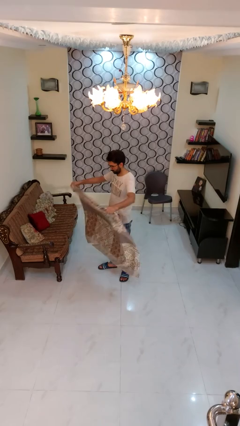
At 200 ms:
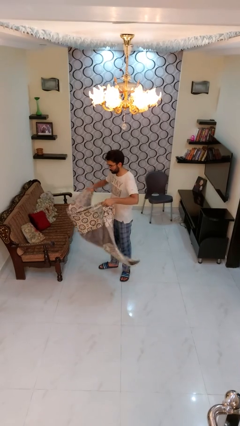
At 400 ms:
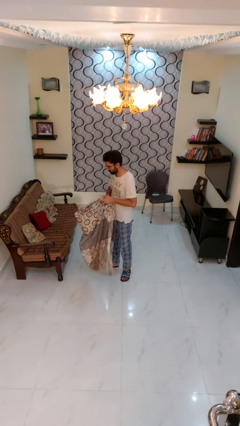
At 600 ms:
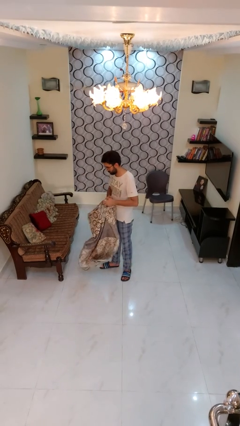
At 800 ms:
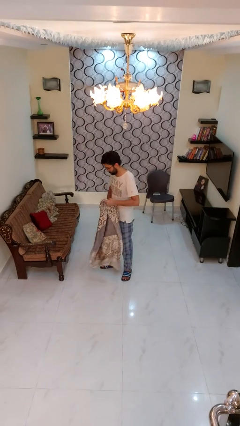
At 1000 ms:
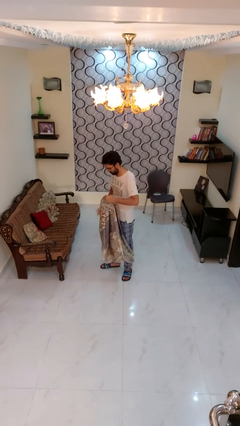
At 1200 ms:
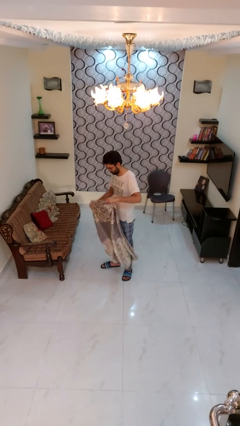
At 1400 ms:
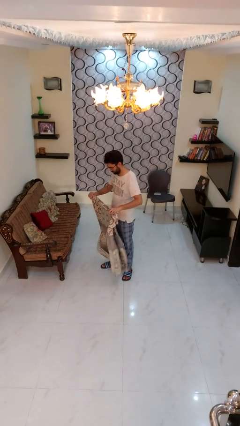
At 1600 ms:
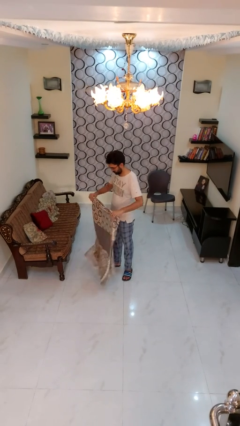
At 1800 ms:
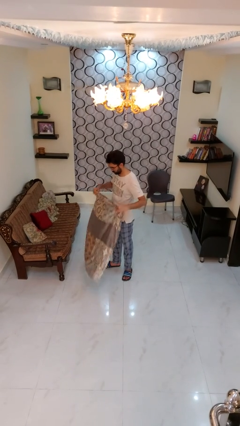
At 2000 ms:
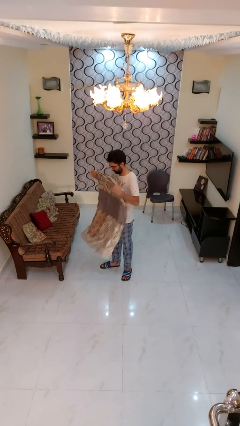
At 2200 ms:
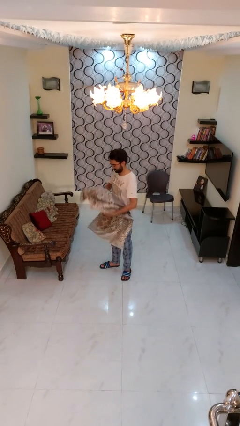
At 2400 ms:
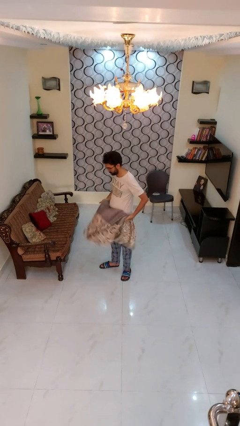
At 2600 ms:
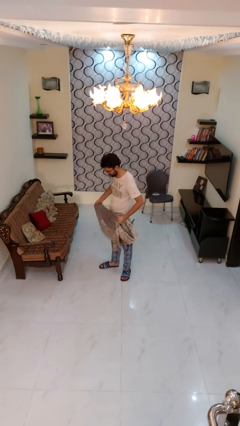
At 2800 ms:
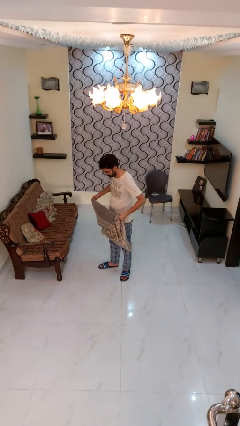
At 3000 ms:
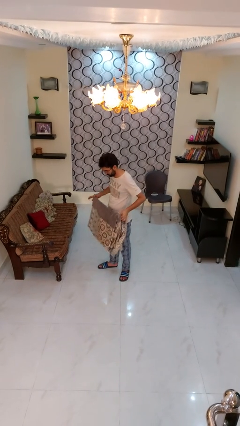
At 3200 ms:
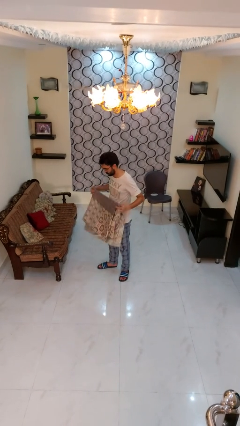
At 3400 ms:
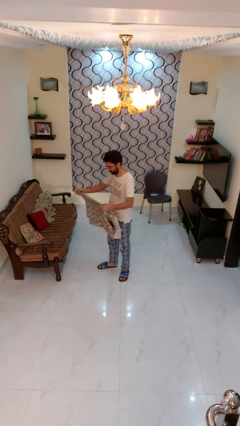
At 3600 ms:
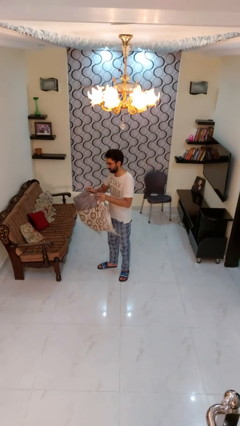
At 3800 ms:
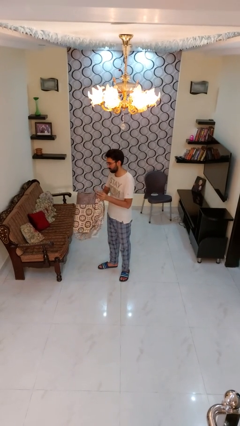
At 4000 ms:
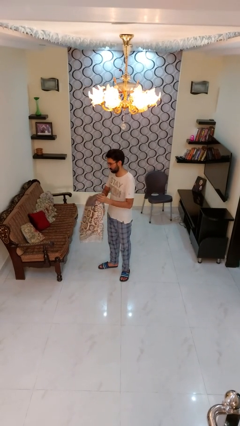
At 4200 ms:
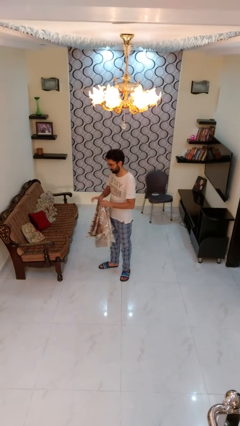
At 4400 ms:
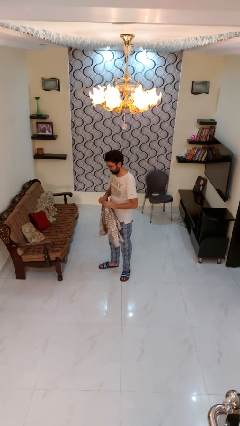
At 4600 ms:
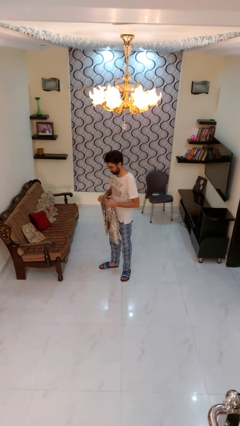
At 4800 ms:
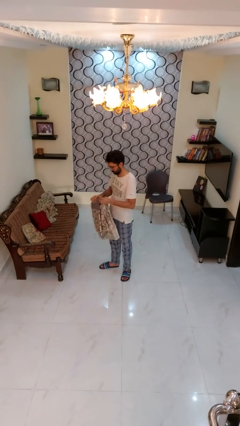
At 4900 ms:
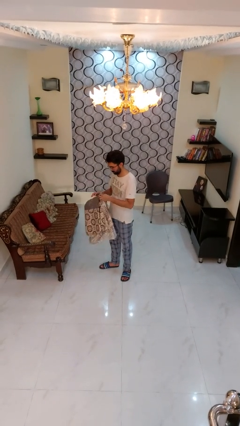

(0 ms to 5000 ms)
person folds blanket

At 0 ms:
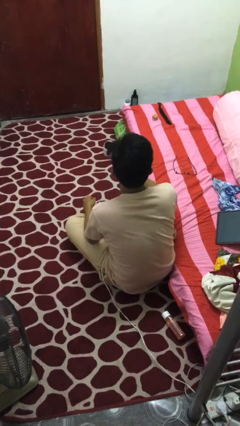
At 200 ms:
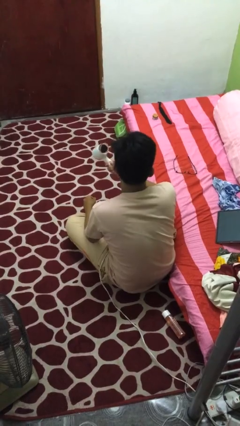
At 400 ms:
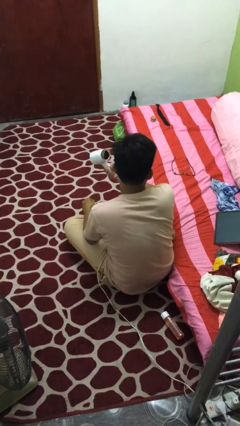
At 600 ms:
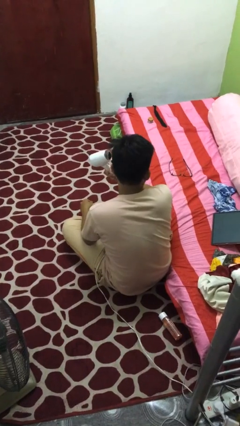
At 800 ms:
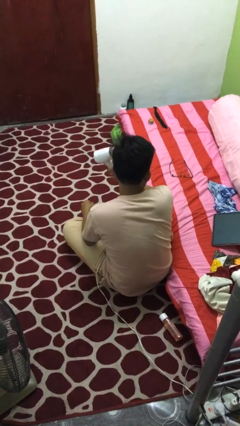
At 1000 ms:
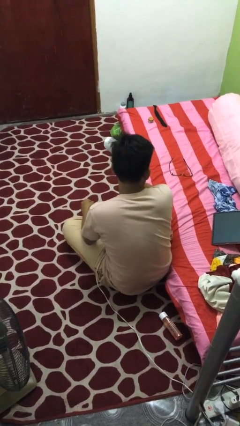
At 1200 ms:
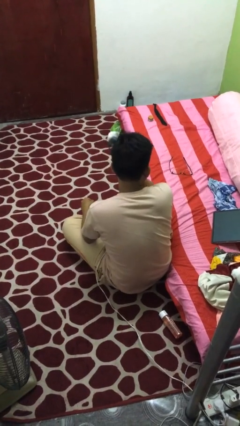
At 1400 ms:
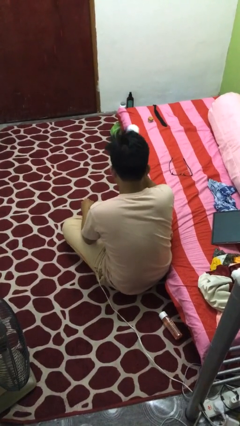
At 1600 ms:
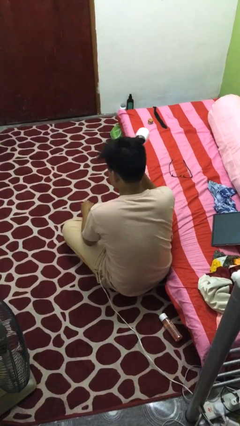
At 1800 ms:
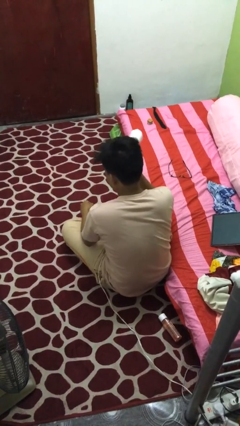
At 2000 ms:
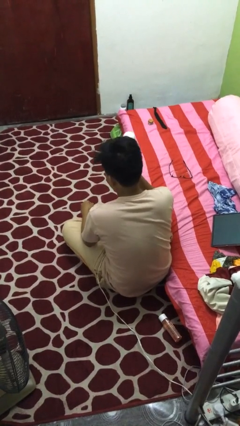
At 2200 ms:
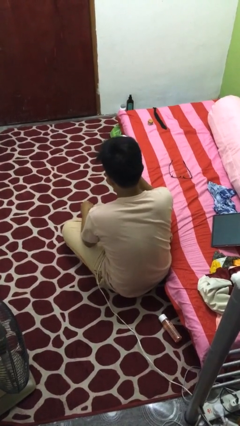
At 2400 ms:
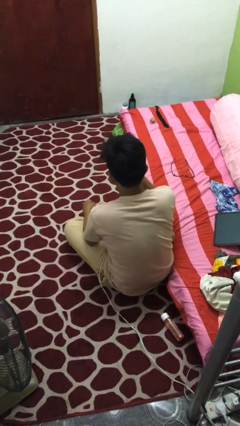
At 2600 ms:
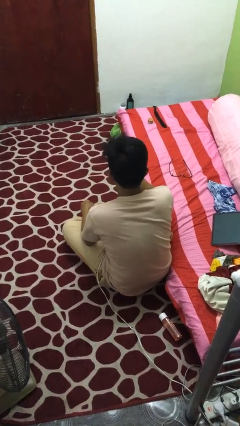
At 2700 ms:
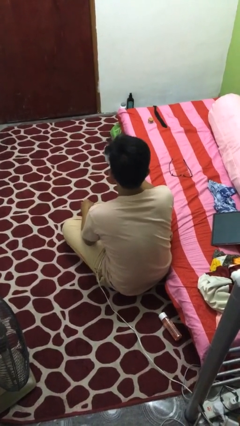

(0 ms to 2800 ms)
person dries hair with hairdryer

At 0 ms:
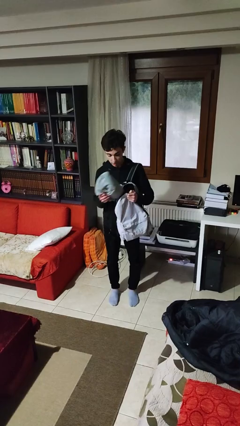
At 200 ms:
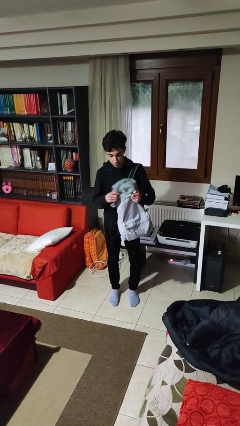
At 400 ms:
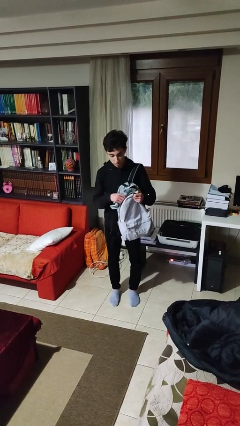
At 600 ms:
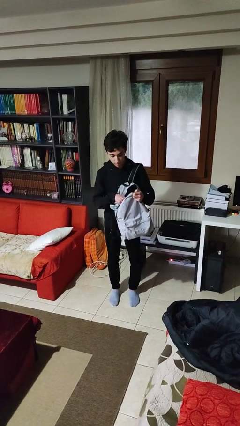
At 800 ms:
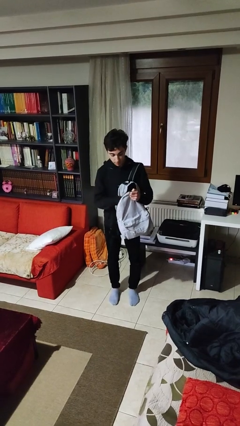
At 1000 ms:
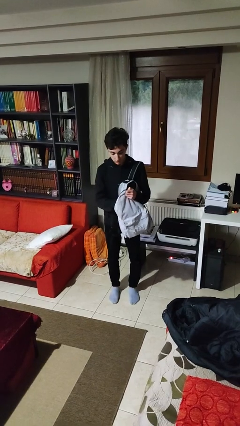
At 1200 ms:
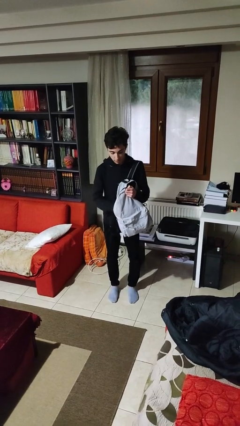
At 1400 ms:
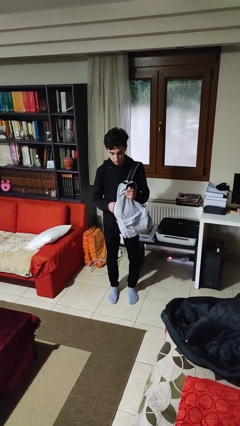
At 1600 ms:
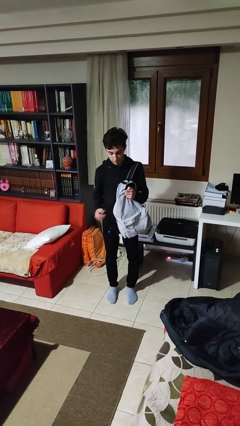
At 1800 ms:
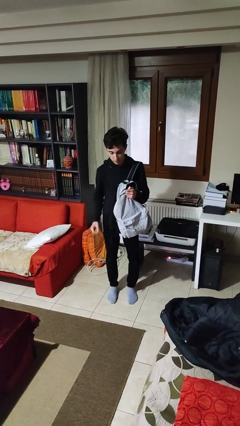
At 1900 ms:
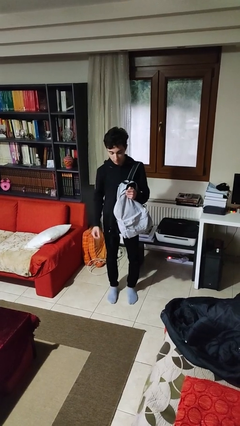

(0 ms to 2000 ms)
person puts object into backpack

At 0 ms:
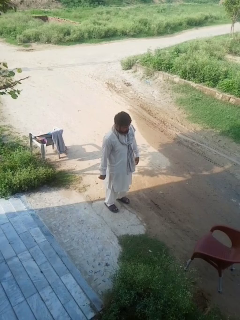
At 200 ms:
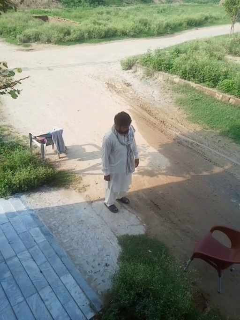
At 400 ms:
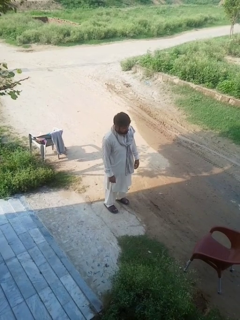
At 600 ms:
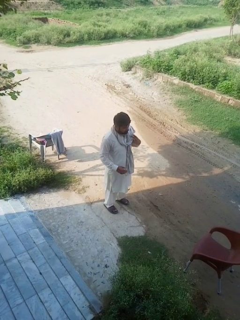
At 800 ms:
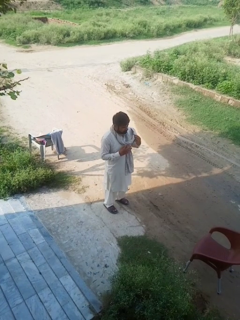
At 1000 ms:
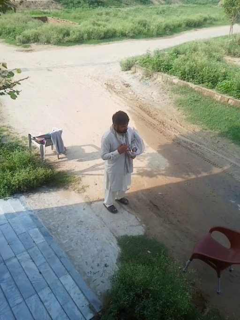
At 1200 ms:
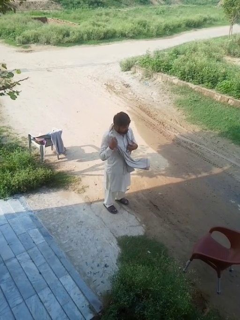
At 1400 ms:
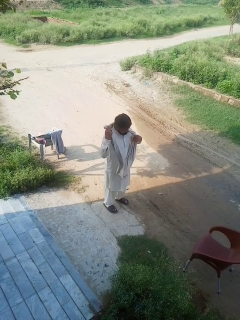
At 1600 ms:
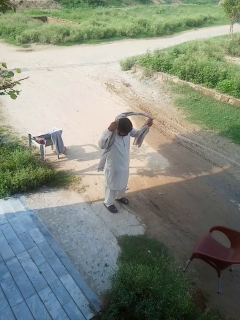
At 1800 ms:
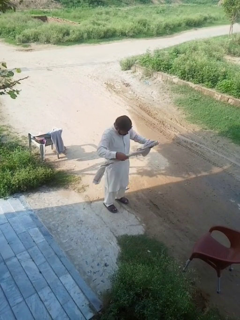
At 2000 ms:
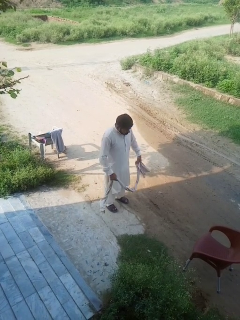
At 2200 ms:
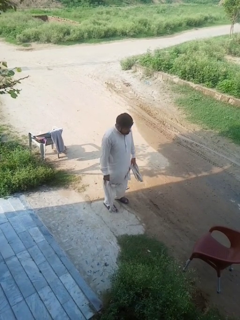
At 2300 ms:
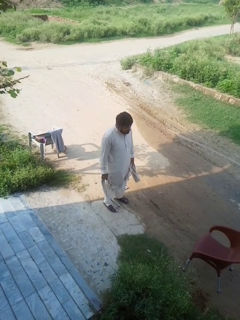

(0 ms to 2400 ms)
person takes off scarf

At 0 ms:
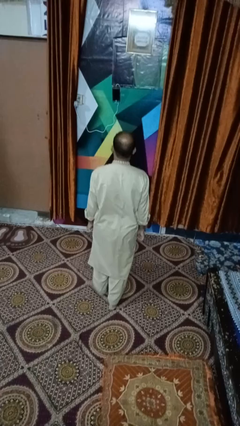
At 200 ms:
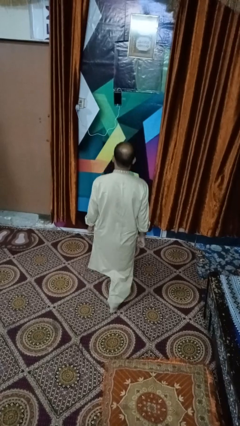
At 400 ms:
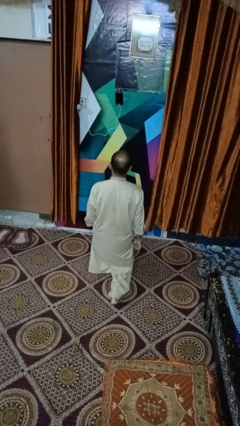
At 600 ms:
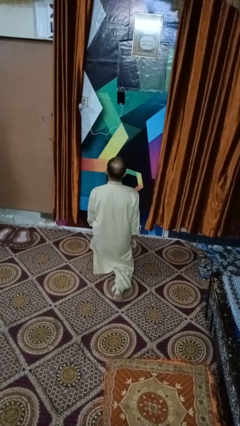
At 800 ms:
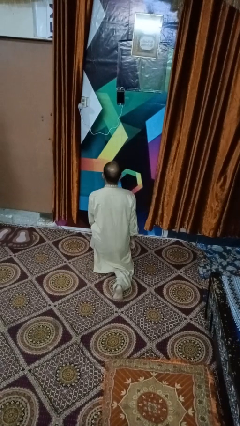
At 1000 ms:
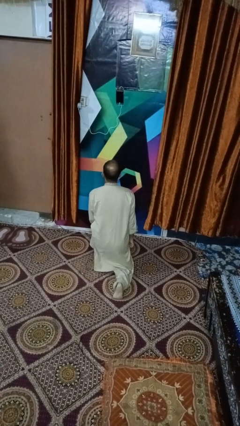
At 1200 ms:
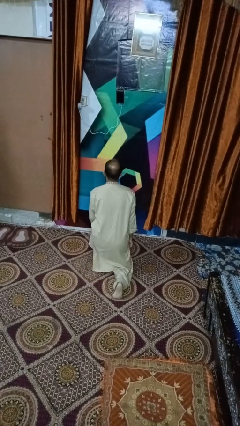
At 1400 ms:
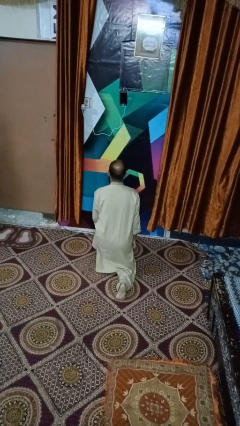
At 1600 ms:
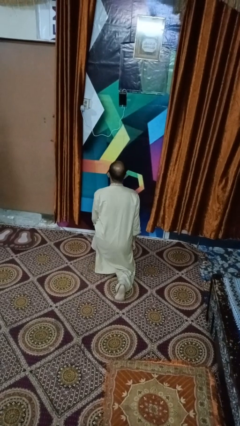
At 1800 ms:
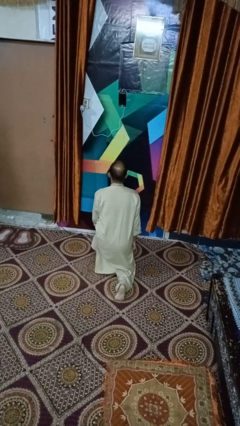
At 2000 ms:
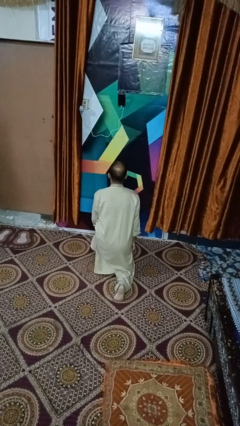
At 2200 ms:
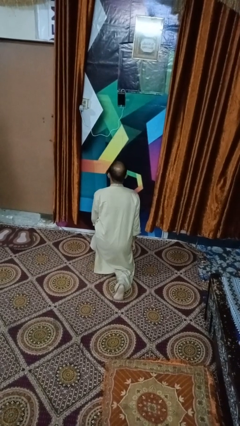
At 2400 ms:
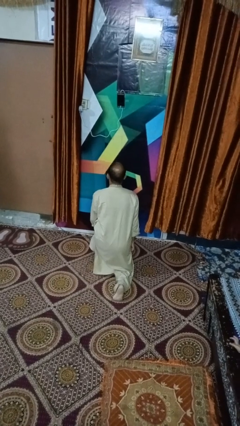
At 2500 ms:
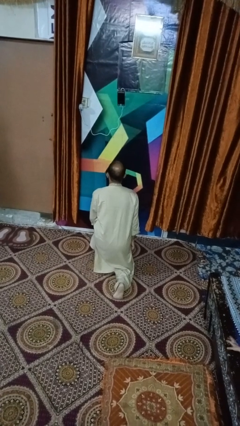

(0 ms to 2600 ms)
person exercises with lunges

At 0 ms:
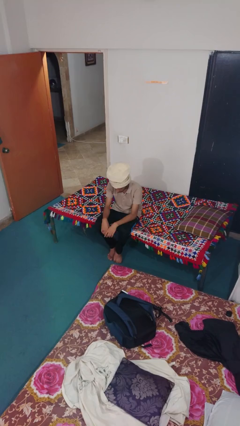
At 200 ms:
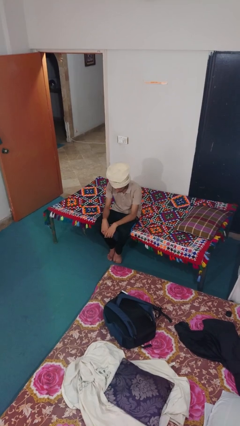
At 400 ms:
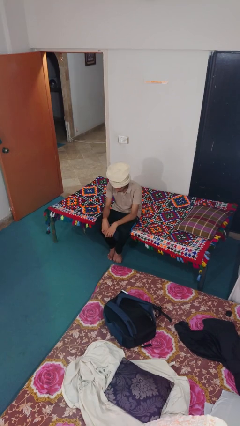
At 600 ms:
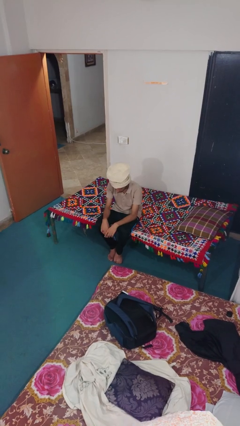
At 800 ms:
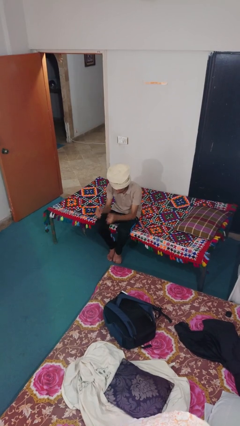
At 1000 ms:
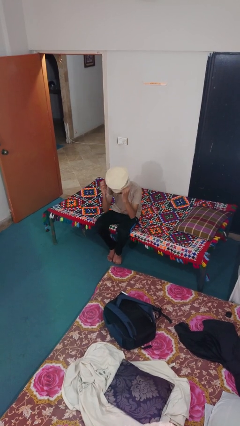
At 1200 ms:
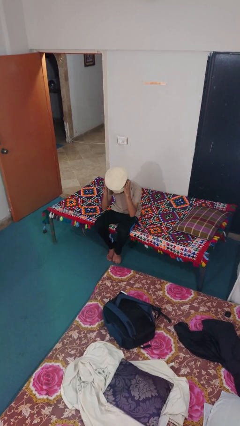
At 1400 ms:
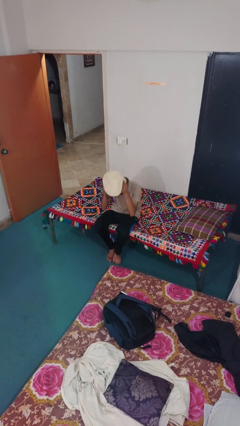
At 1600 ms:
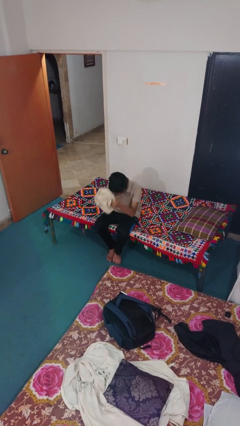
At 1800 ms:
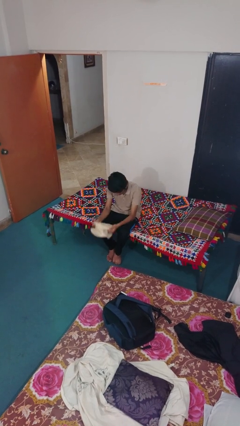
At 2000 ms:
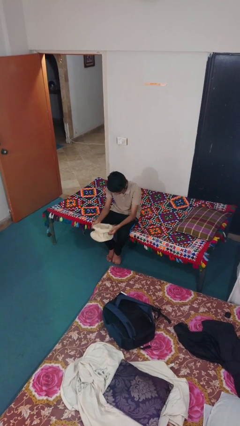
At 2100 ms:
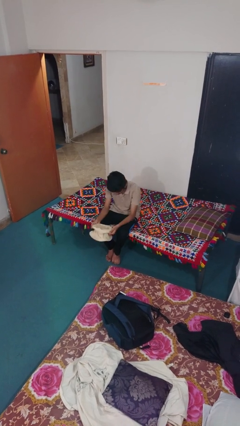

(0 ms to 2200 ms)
person takes off hat

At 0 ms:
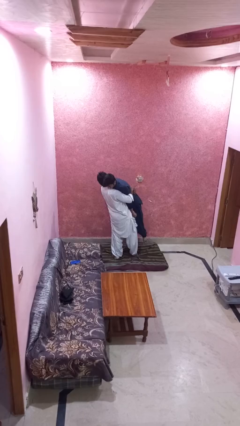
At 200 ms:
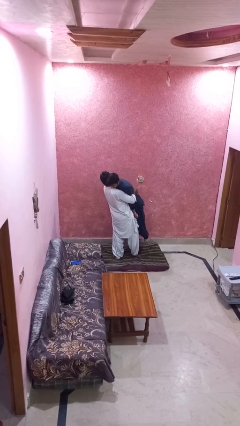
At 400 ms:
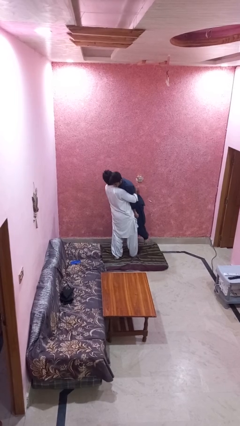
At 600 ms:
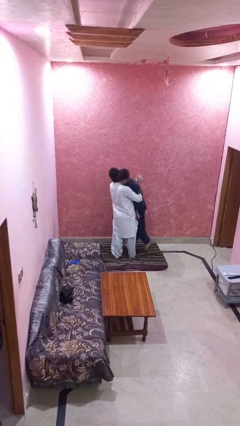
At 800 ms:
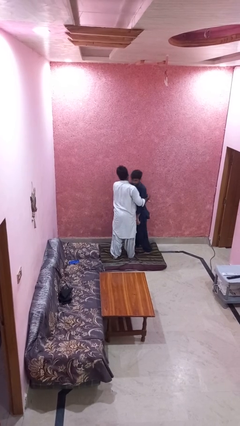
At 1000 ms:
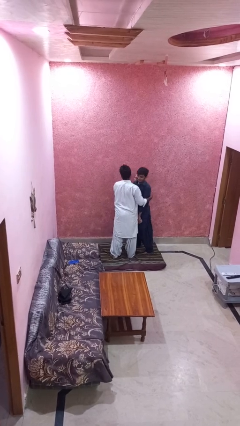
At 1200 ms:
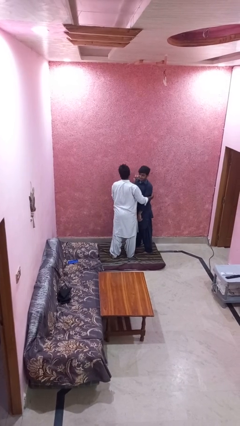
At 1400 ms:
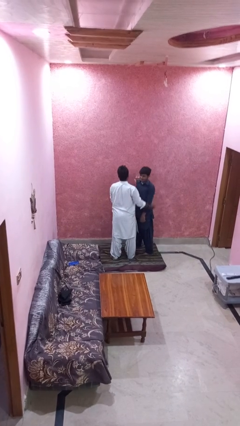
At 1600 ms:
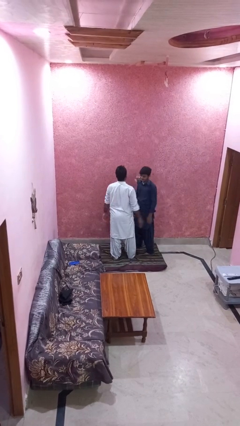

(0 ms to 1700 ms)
person puts down person
